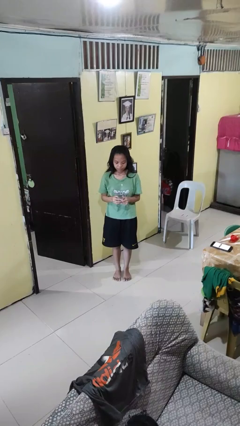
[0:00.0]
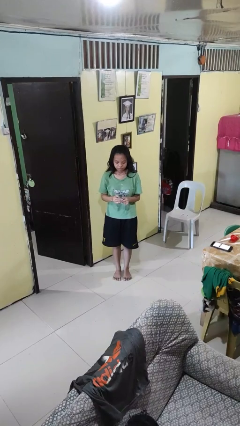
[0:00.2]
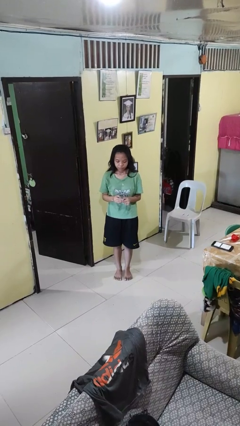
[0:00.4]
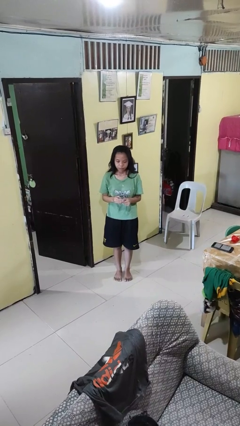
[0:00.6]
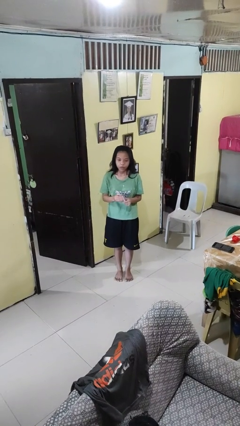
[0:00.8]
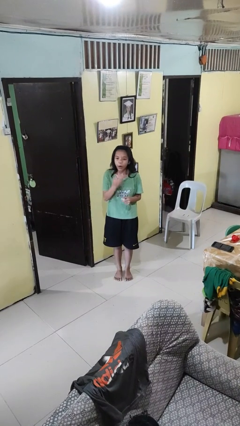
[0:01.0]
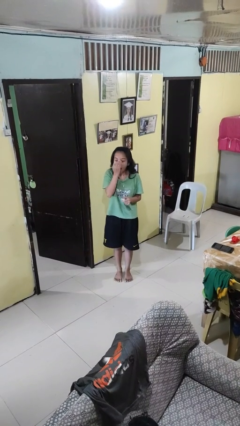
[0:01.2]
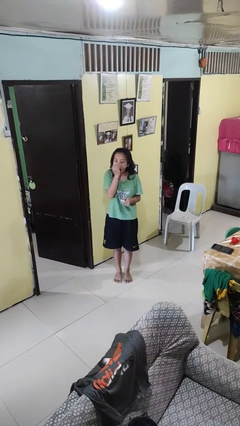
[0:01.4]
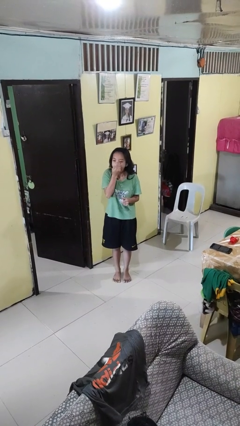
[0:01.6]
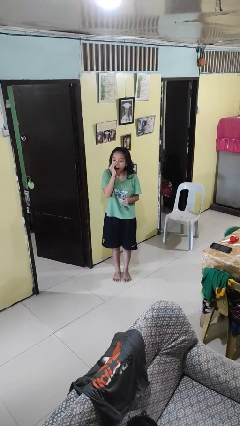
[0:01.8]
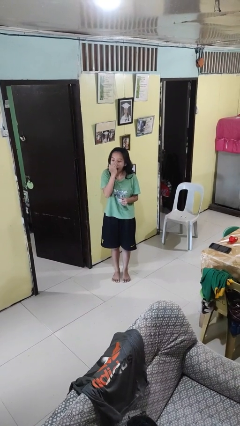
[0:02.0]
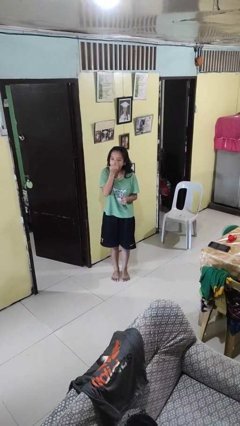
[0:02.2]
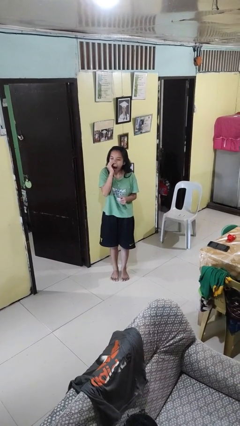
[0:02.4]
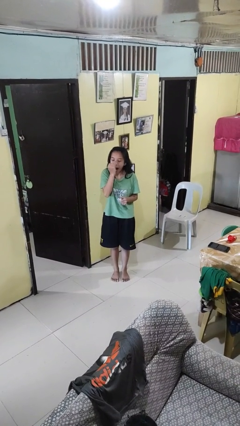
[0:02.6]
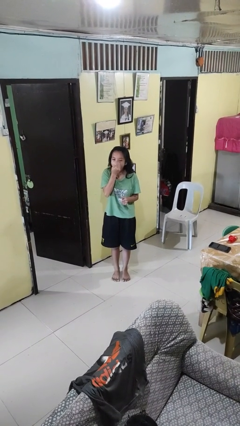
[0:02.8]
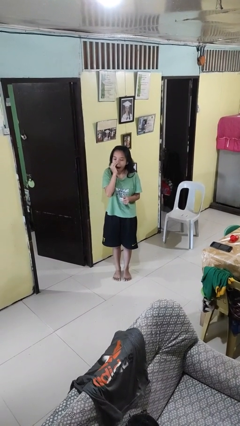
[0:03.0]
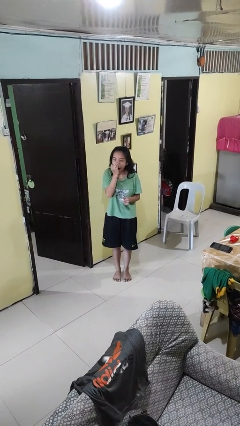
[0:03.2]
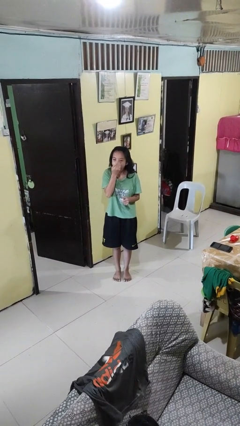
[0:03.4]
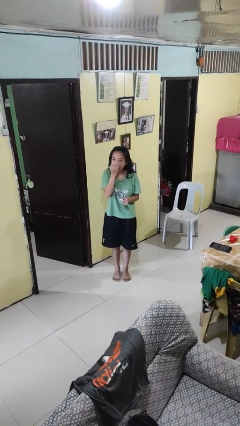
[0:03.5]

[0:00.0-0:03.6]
person applies facial moisturizer

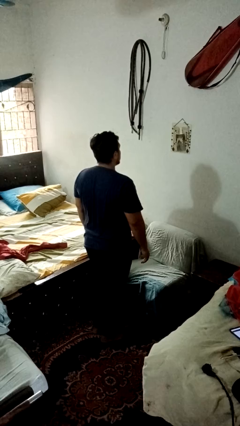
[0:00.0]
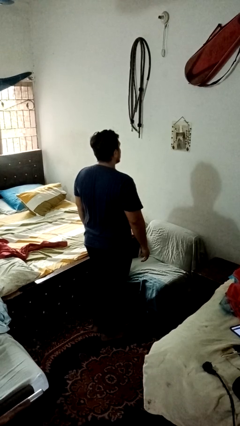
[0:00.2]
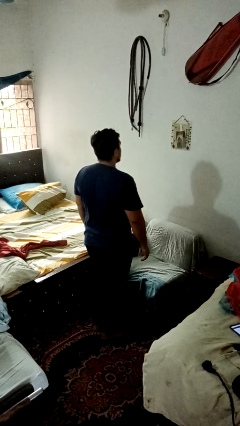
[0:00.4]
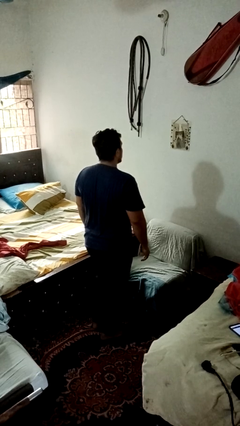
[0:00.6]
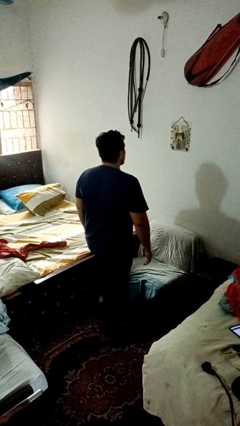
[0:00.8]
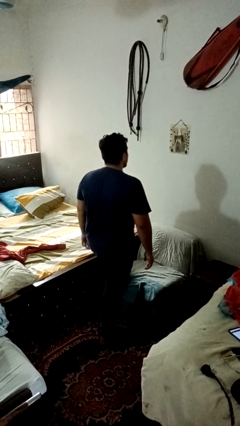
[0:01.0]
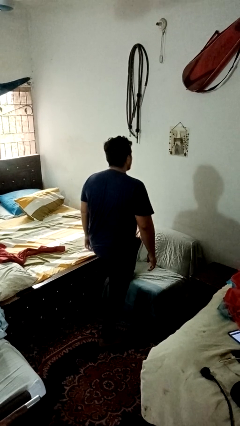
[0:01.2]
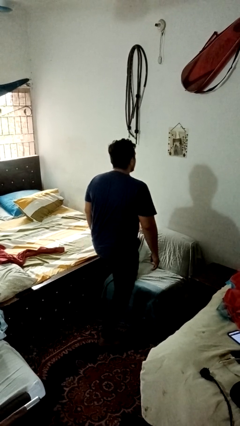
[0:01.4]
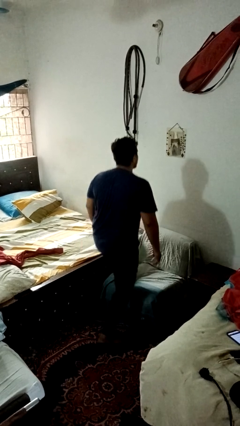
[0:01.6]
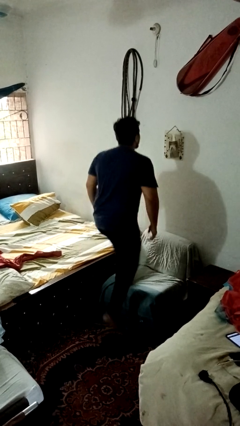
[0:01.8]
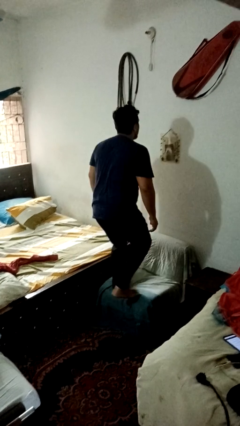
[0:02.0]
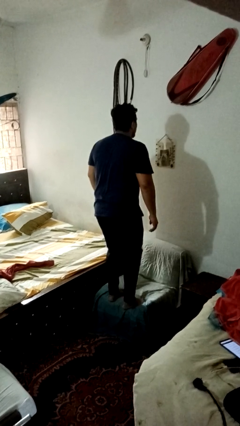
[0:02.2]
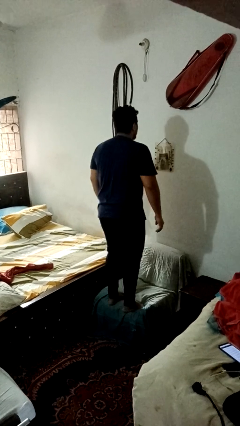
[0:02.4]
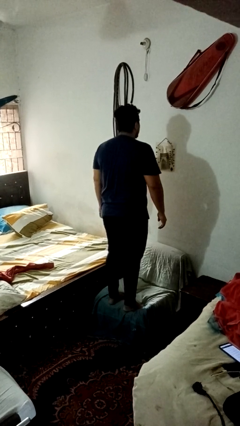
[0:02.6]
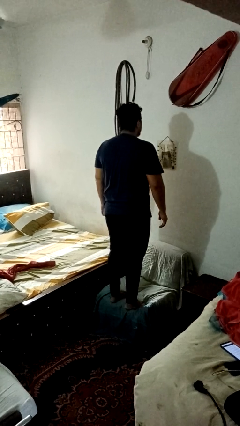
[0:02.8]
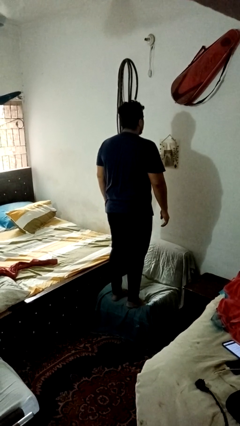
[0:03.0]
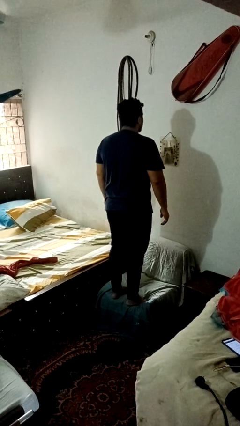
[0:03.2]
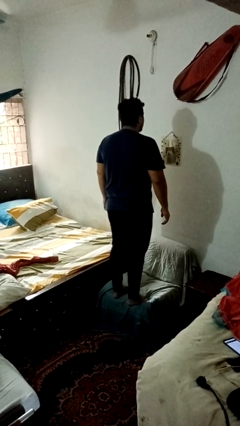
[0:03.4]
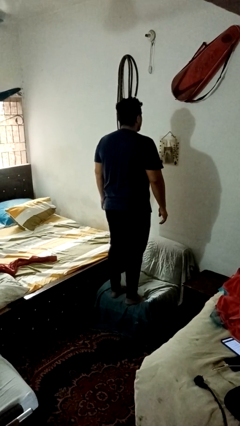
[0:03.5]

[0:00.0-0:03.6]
person climbs on couch

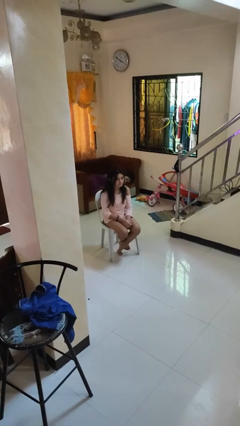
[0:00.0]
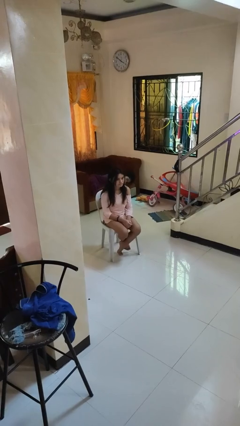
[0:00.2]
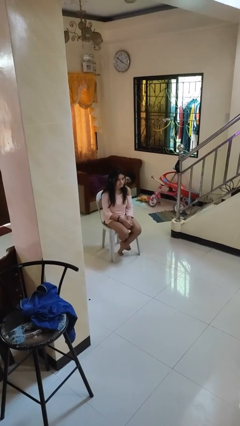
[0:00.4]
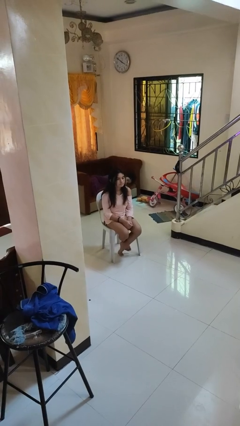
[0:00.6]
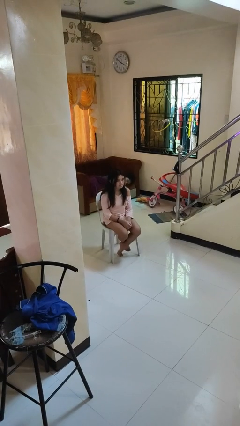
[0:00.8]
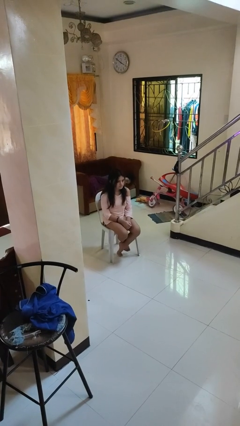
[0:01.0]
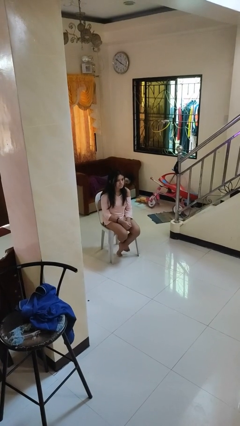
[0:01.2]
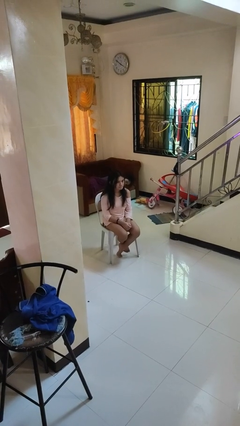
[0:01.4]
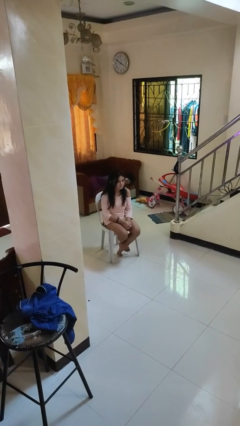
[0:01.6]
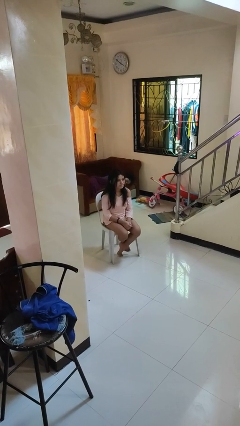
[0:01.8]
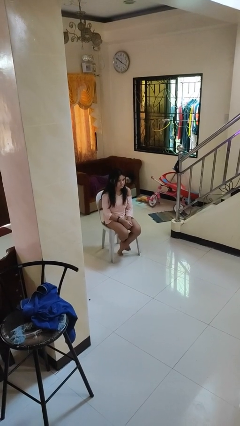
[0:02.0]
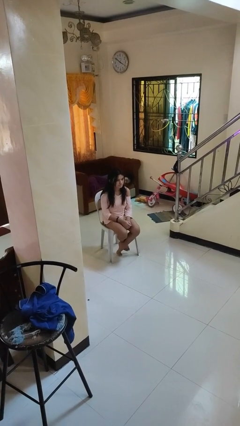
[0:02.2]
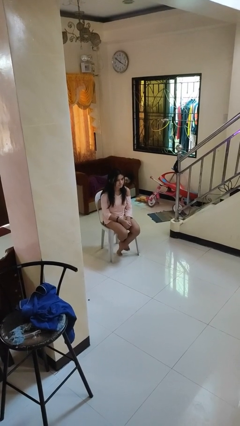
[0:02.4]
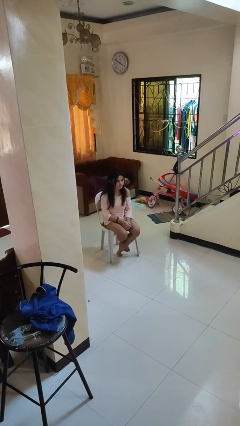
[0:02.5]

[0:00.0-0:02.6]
person nods head

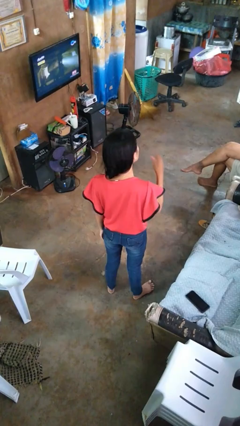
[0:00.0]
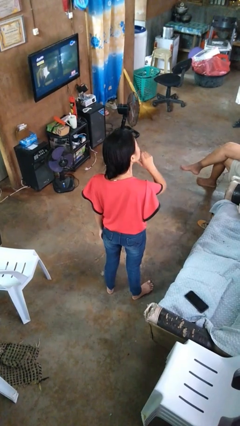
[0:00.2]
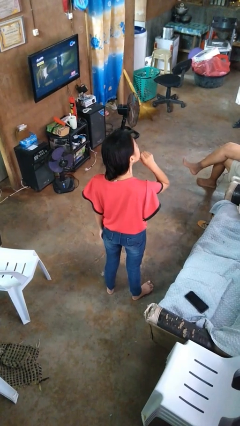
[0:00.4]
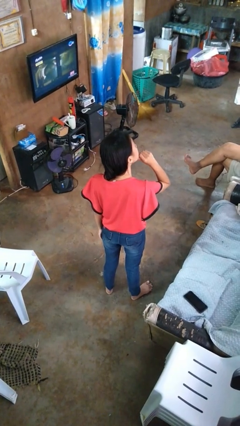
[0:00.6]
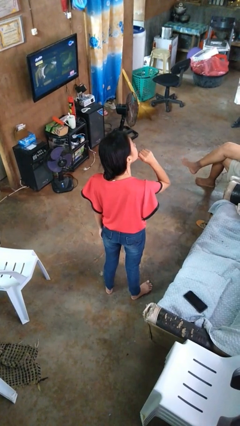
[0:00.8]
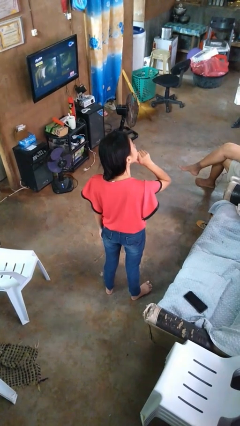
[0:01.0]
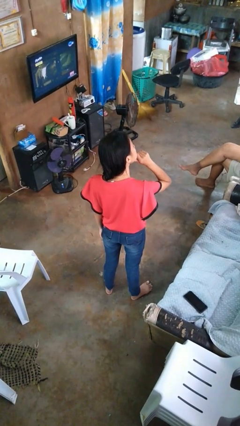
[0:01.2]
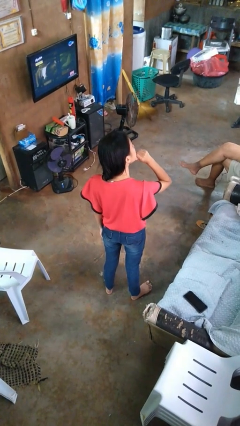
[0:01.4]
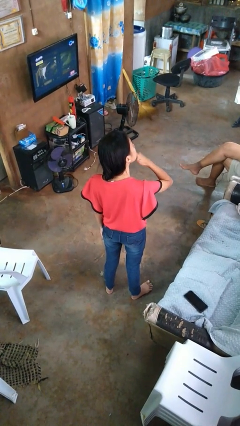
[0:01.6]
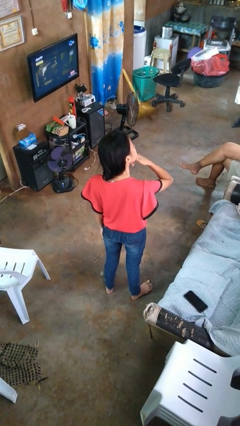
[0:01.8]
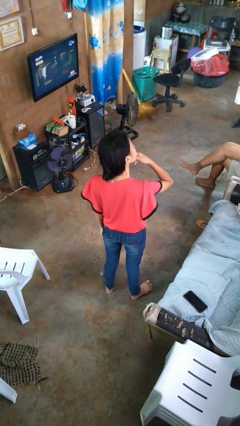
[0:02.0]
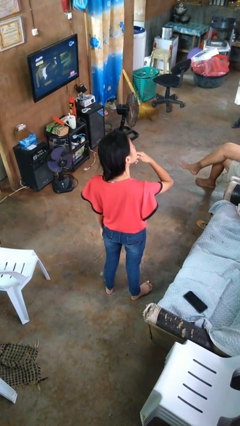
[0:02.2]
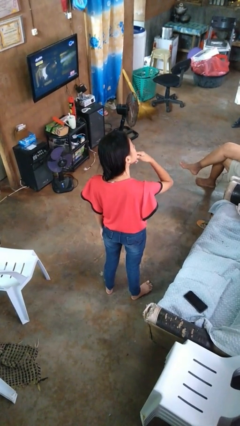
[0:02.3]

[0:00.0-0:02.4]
person strokes chin

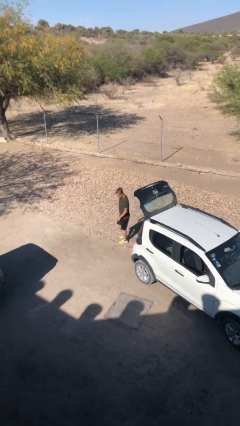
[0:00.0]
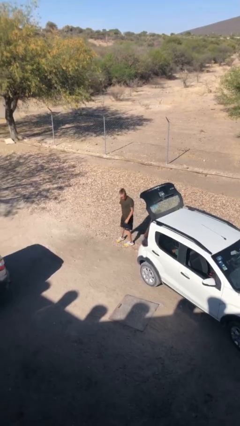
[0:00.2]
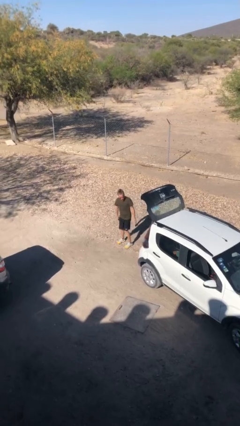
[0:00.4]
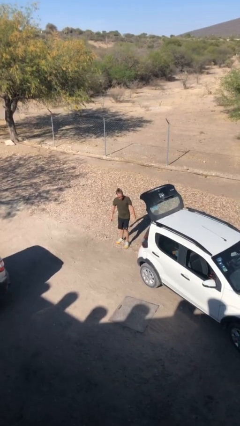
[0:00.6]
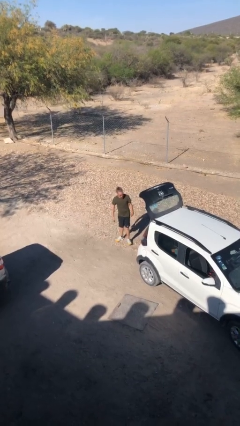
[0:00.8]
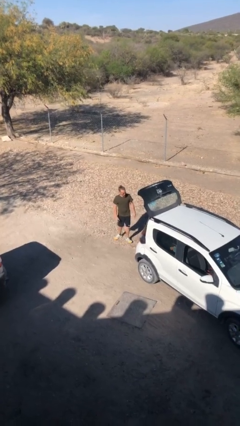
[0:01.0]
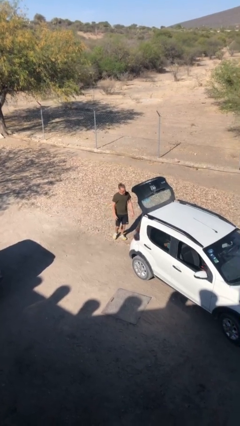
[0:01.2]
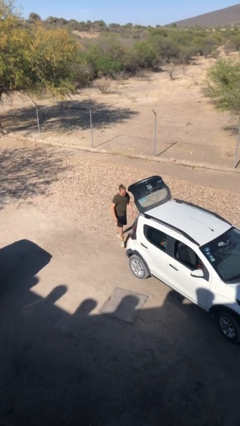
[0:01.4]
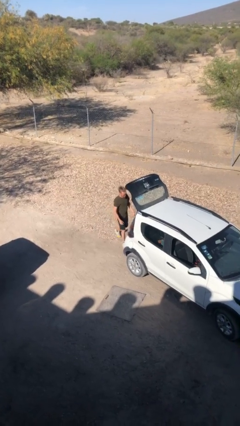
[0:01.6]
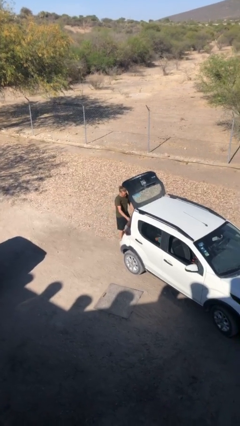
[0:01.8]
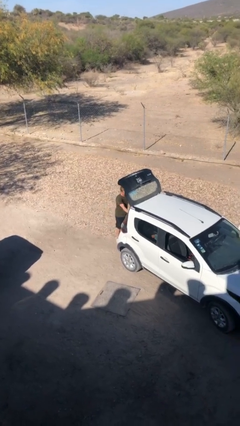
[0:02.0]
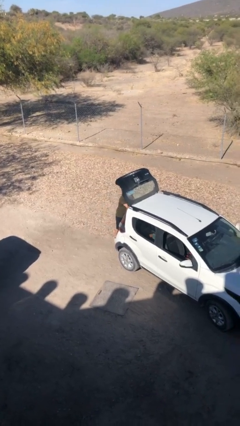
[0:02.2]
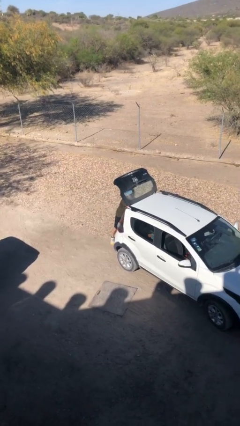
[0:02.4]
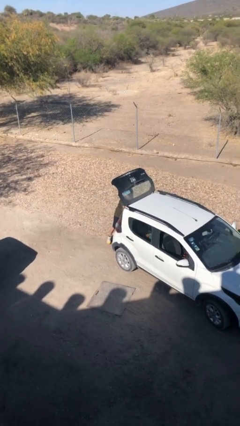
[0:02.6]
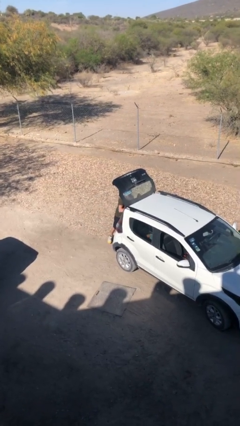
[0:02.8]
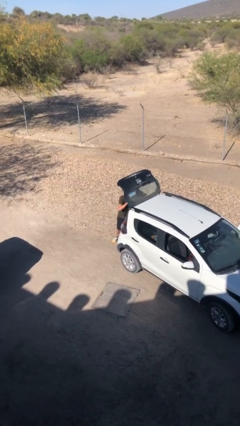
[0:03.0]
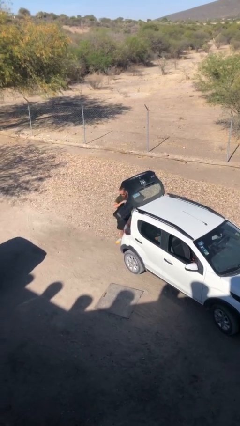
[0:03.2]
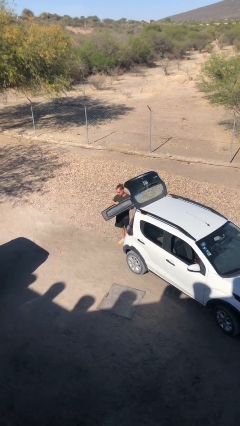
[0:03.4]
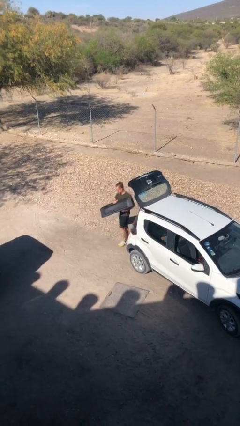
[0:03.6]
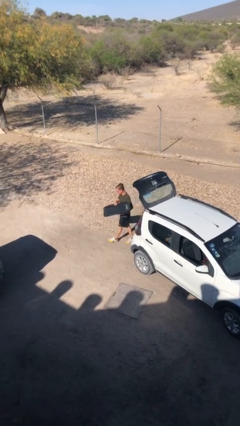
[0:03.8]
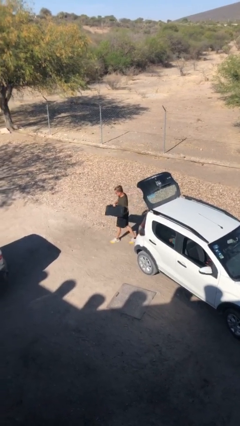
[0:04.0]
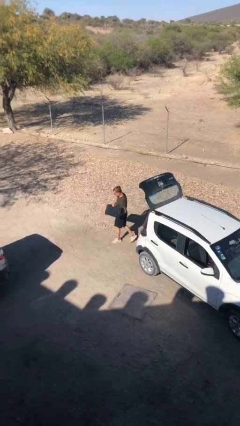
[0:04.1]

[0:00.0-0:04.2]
person unloads car

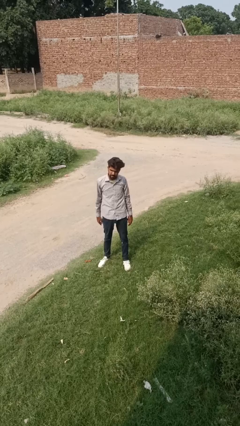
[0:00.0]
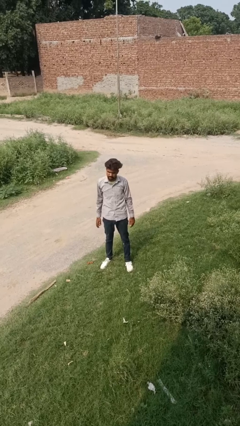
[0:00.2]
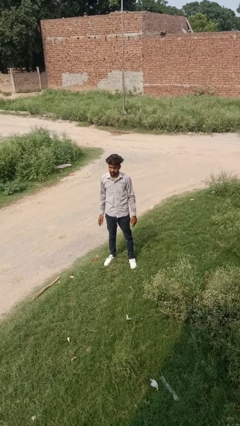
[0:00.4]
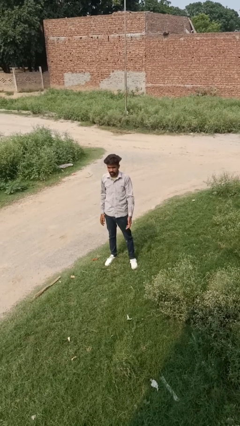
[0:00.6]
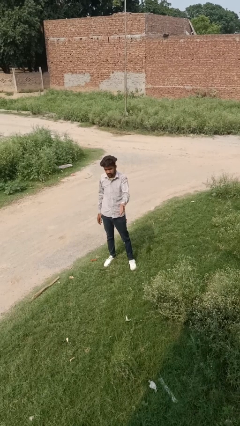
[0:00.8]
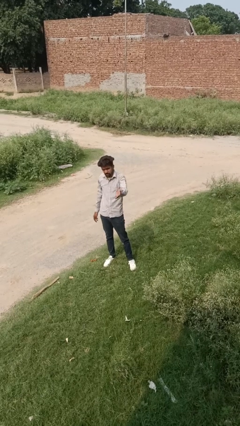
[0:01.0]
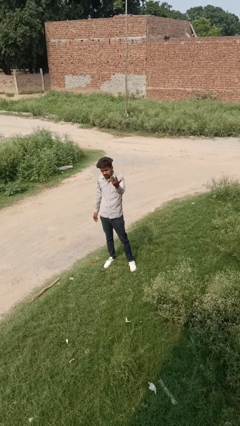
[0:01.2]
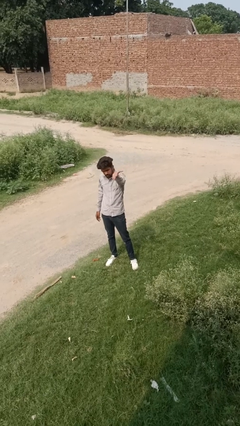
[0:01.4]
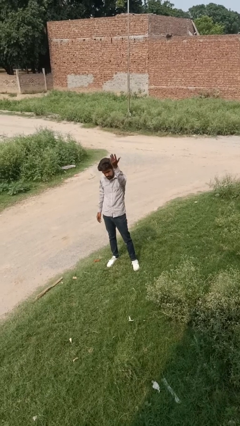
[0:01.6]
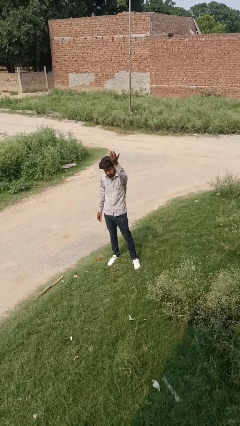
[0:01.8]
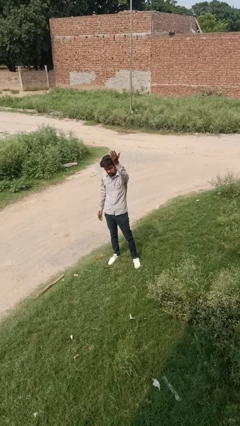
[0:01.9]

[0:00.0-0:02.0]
person gestures swipe up
